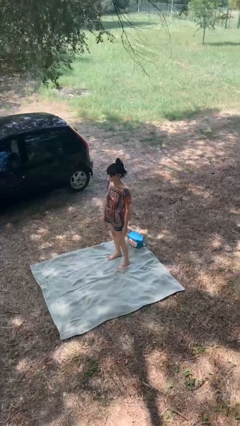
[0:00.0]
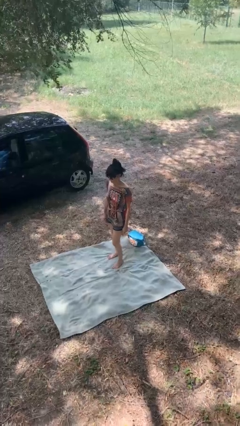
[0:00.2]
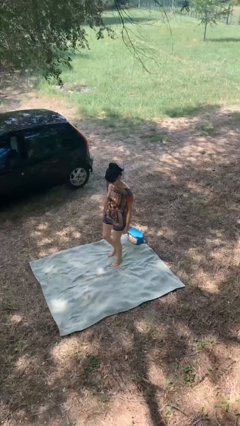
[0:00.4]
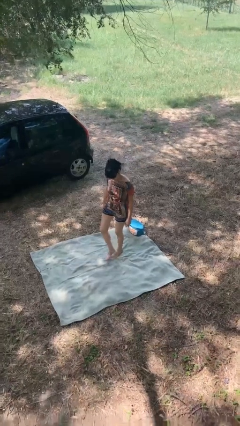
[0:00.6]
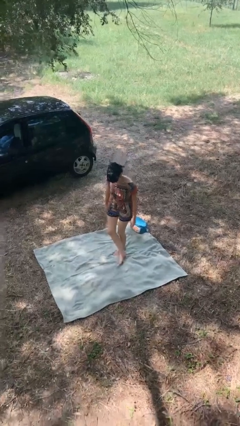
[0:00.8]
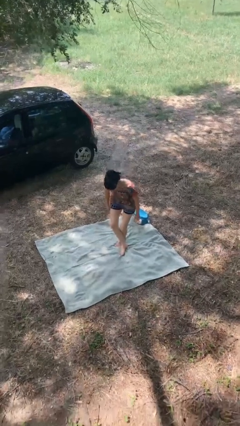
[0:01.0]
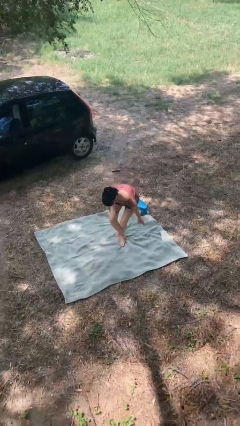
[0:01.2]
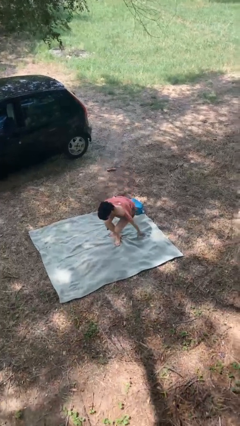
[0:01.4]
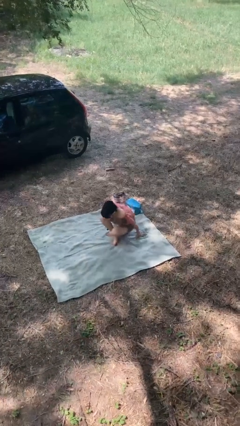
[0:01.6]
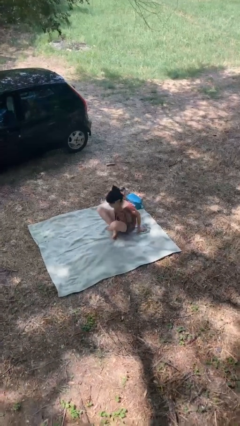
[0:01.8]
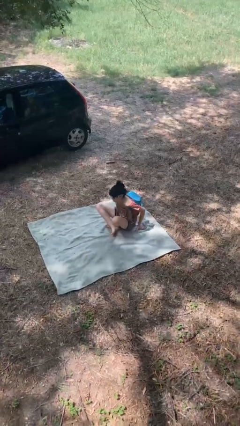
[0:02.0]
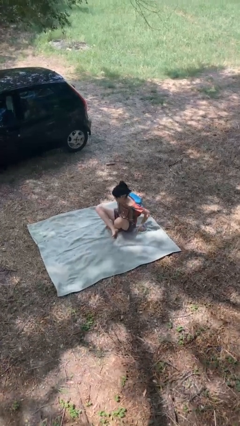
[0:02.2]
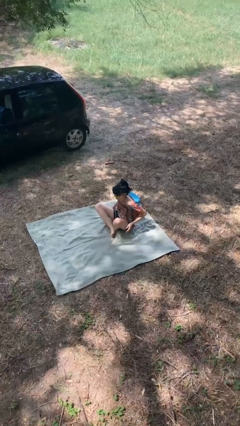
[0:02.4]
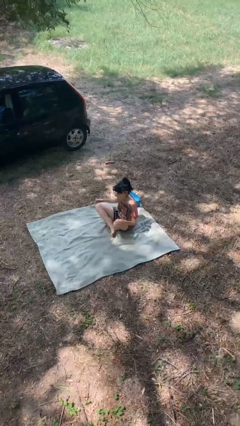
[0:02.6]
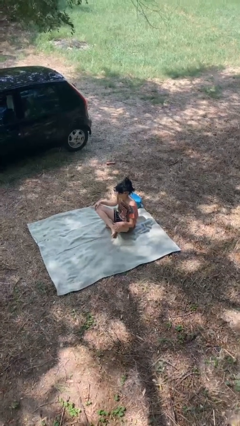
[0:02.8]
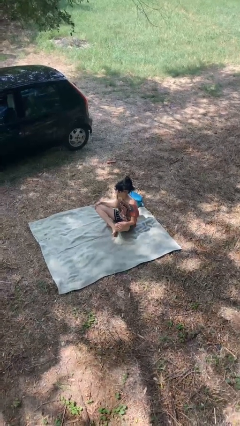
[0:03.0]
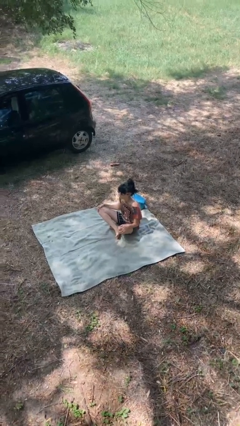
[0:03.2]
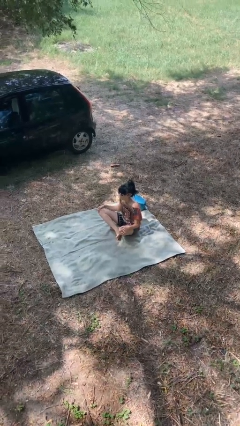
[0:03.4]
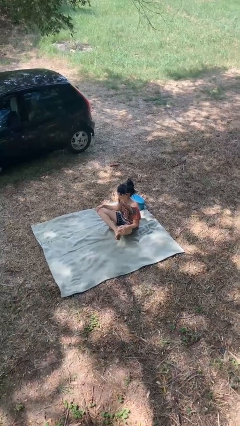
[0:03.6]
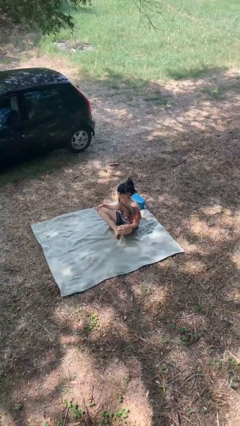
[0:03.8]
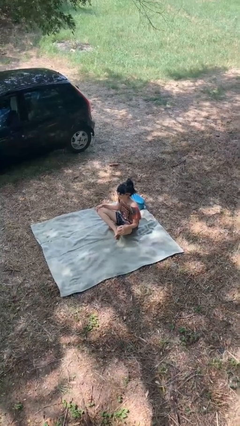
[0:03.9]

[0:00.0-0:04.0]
person sits crisscross

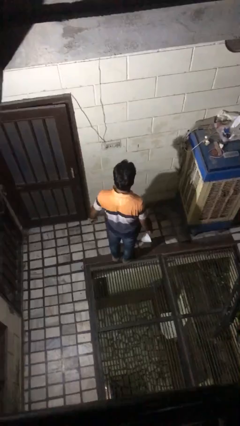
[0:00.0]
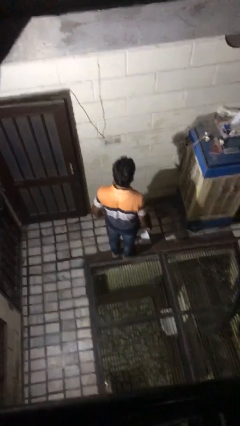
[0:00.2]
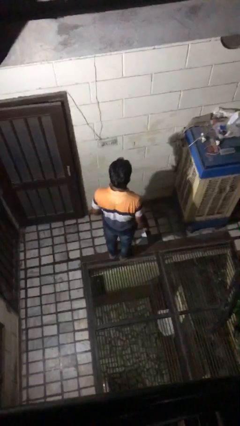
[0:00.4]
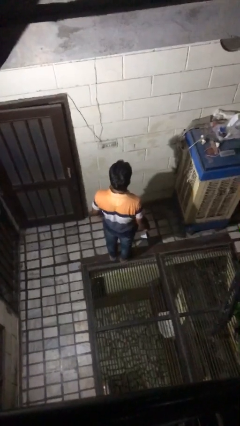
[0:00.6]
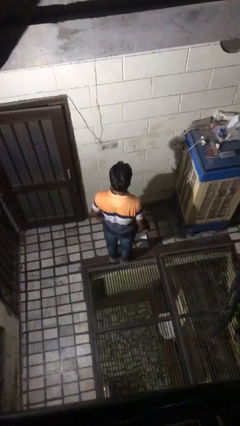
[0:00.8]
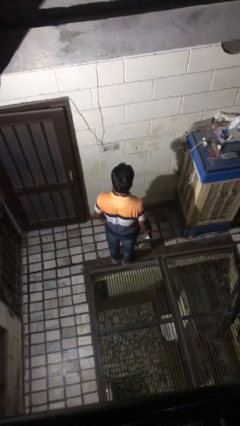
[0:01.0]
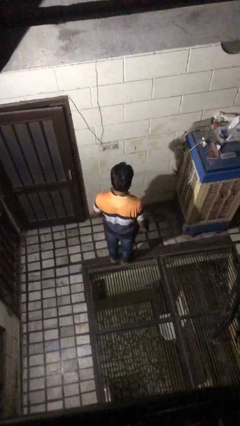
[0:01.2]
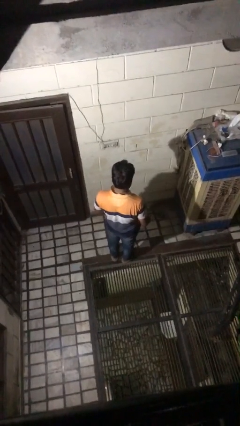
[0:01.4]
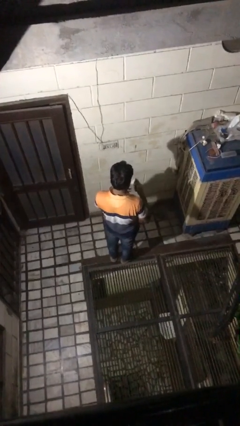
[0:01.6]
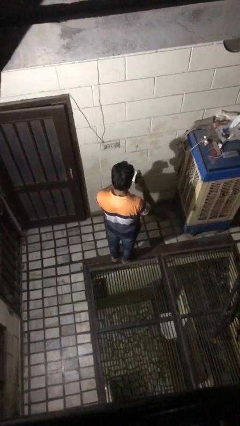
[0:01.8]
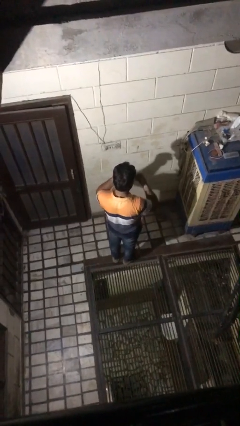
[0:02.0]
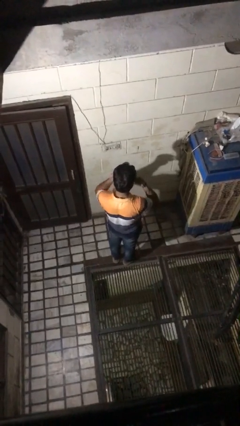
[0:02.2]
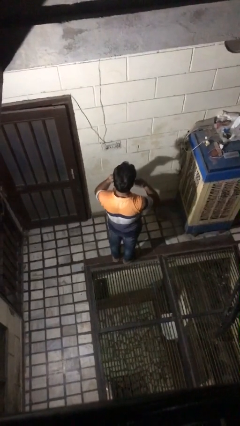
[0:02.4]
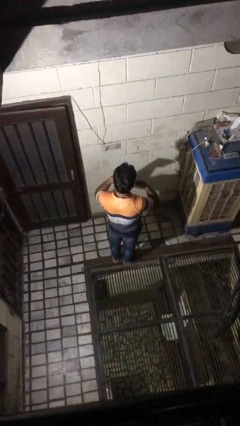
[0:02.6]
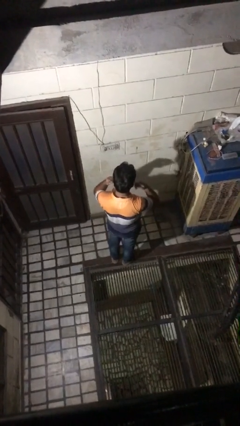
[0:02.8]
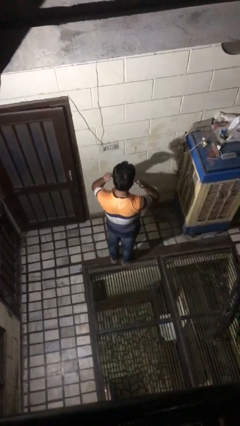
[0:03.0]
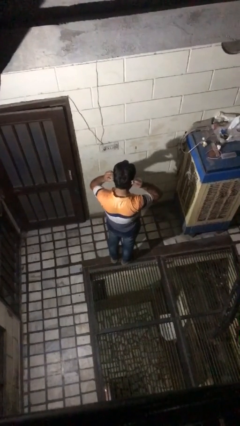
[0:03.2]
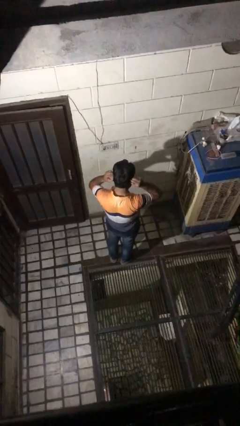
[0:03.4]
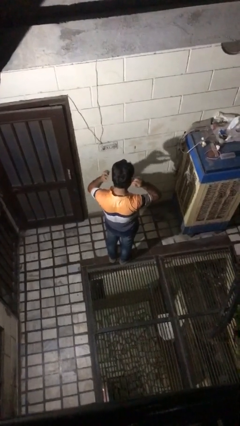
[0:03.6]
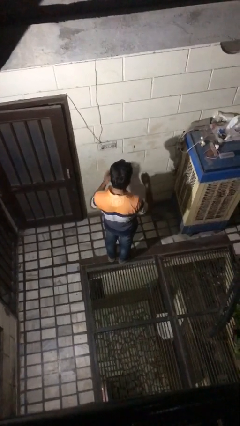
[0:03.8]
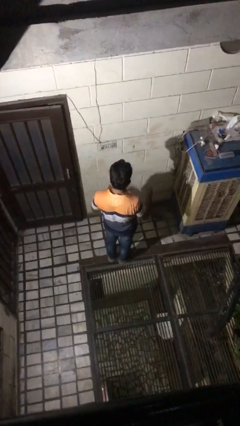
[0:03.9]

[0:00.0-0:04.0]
person puts on facemask

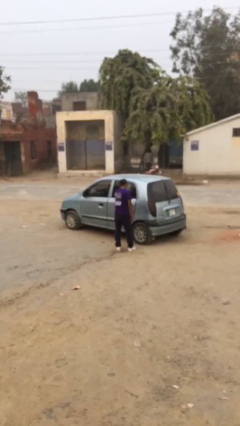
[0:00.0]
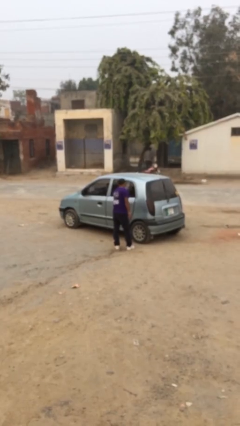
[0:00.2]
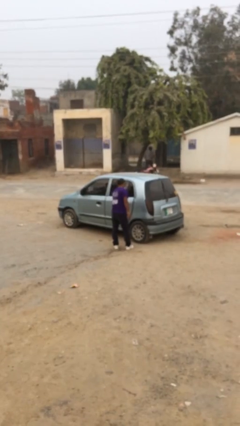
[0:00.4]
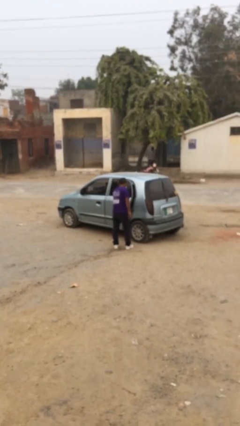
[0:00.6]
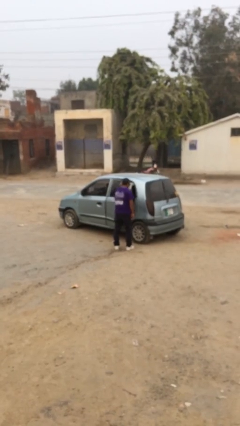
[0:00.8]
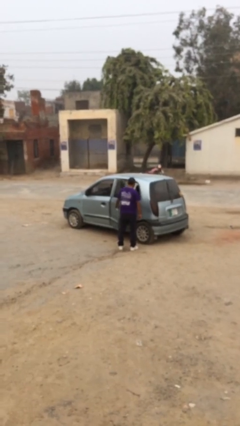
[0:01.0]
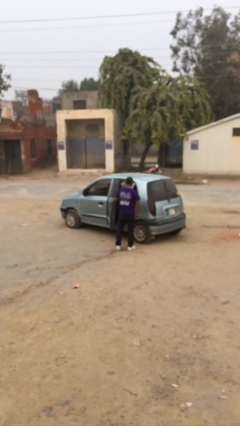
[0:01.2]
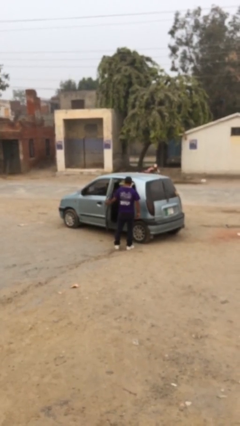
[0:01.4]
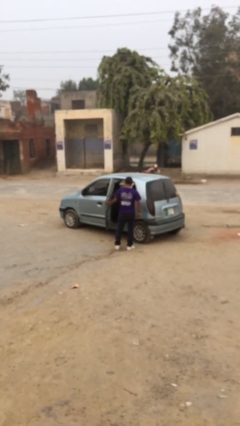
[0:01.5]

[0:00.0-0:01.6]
person opens car door

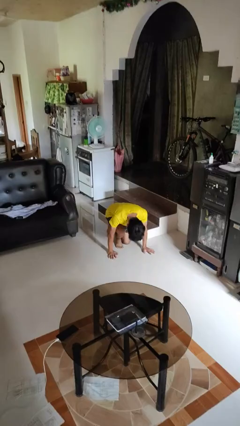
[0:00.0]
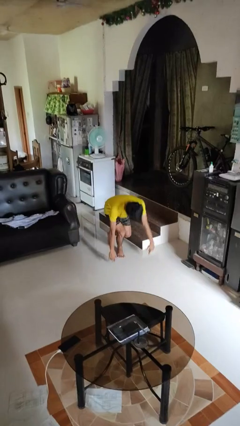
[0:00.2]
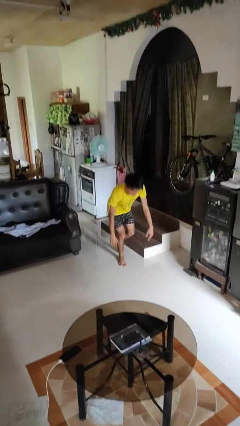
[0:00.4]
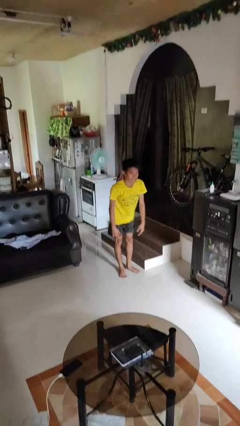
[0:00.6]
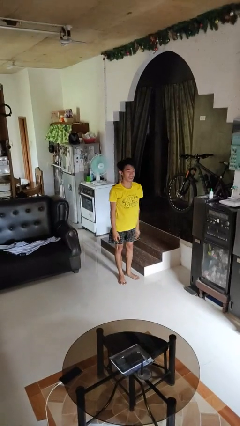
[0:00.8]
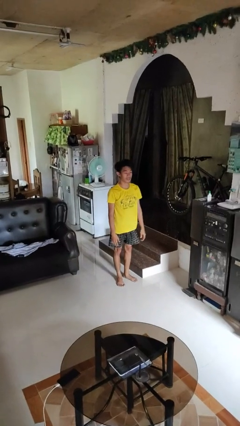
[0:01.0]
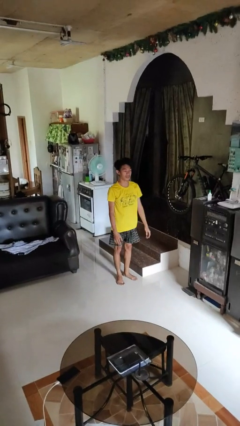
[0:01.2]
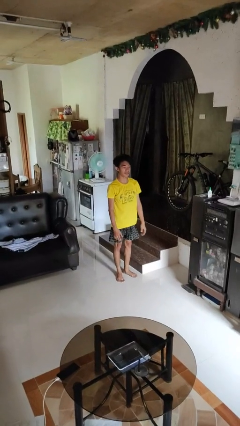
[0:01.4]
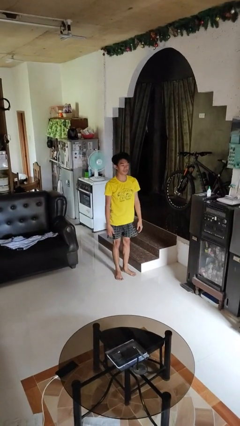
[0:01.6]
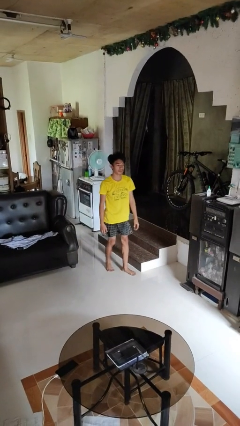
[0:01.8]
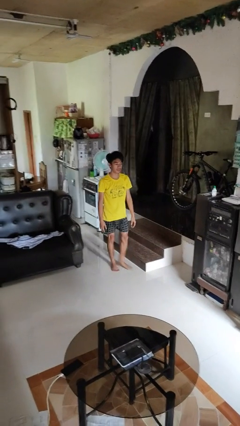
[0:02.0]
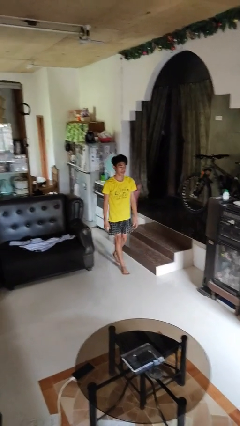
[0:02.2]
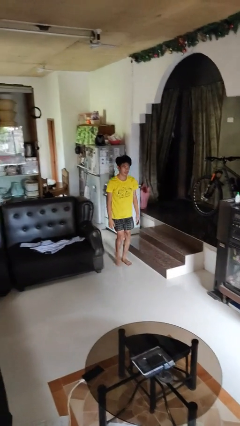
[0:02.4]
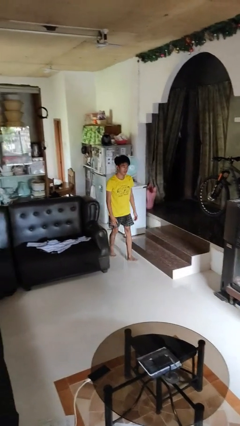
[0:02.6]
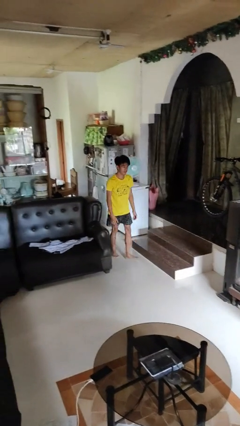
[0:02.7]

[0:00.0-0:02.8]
person stands up from floor

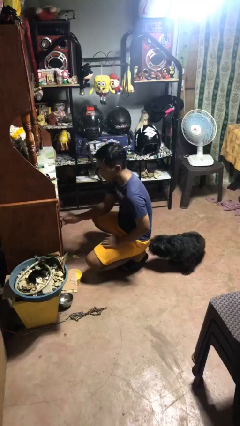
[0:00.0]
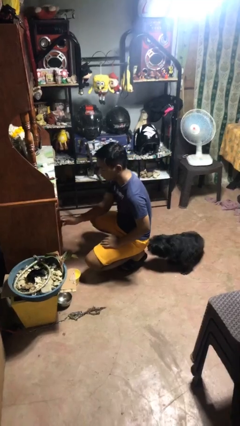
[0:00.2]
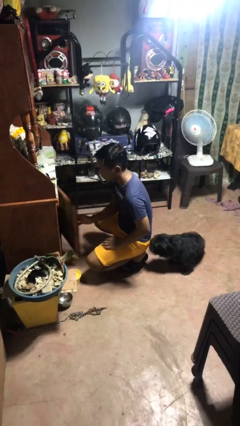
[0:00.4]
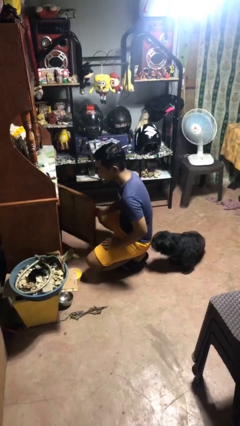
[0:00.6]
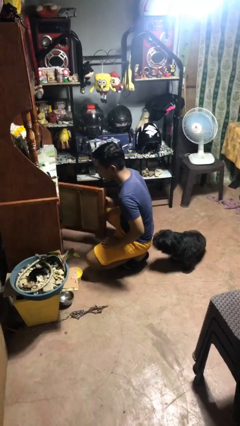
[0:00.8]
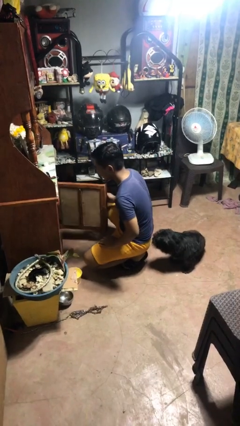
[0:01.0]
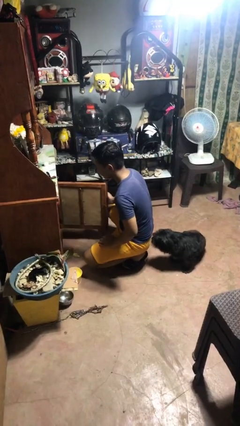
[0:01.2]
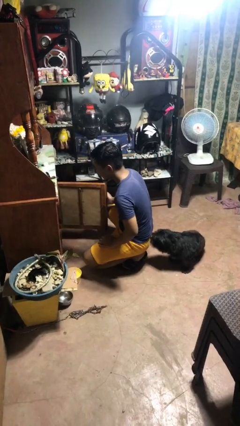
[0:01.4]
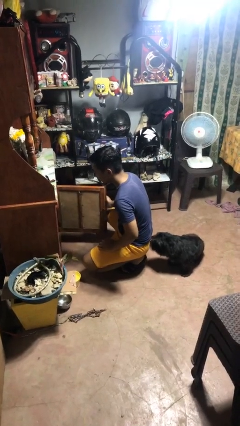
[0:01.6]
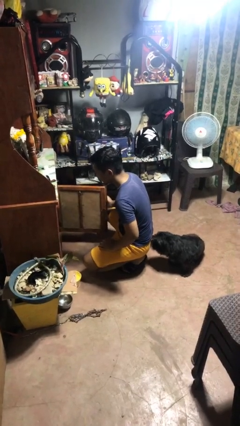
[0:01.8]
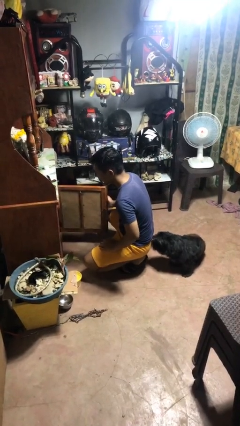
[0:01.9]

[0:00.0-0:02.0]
person opens cabinet

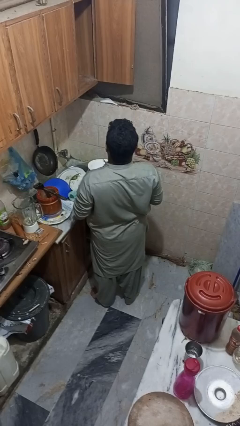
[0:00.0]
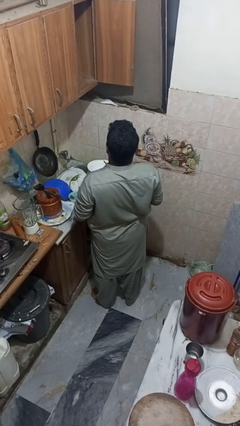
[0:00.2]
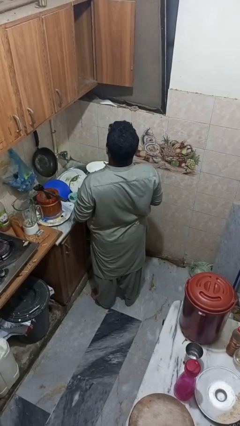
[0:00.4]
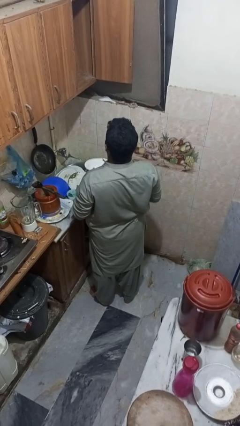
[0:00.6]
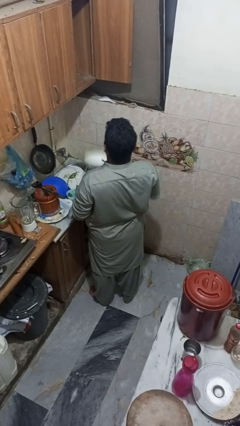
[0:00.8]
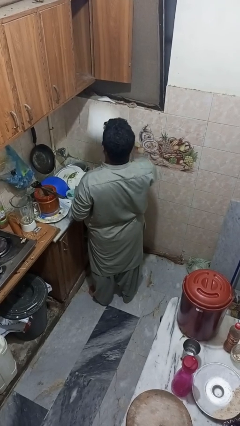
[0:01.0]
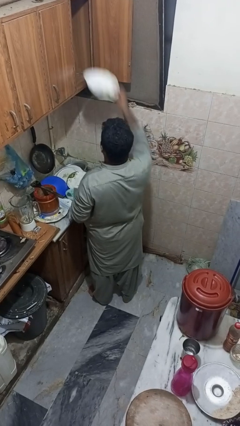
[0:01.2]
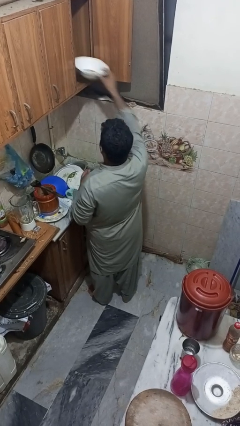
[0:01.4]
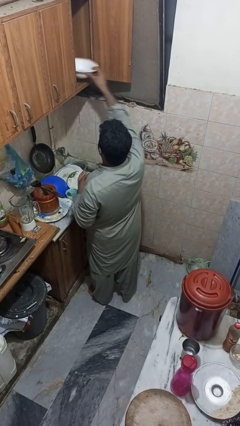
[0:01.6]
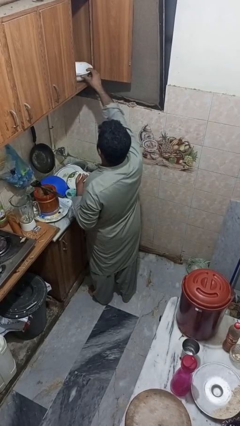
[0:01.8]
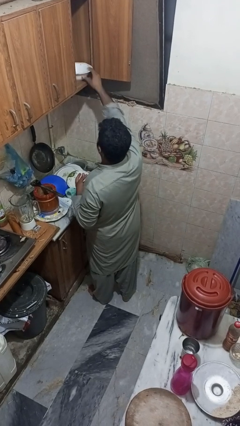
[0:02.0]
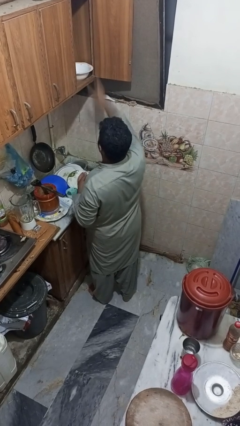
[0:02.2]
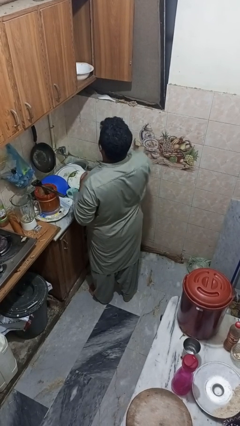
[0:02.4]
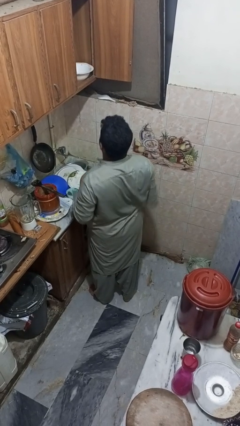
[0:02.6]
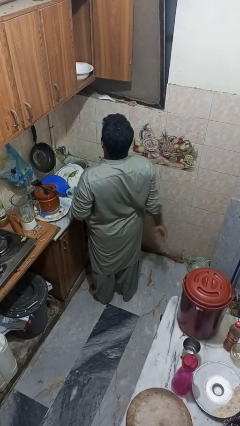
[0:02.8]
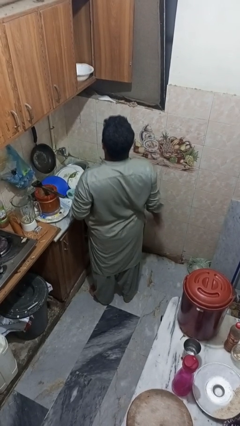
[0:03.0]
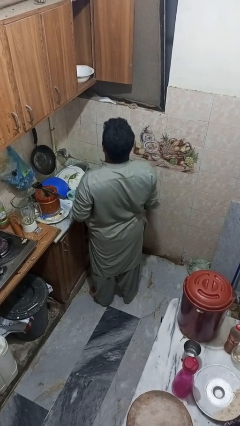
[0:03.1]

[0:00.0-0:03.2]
person puts object in cabinet
